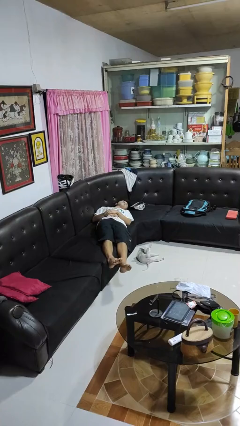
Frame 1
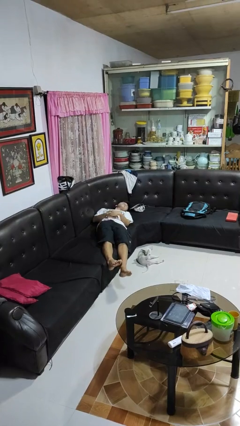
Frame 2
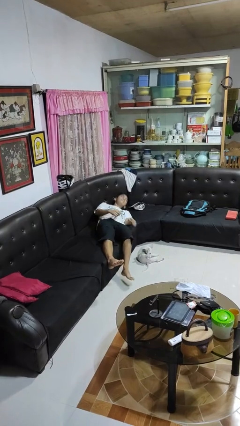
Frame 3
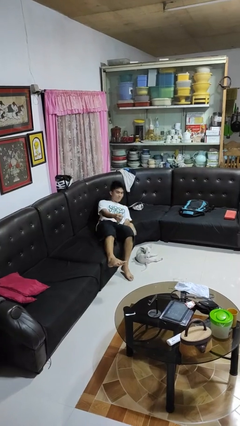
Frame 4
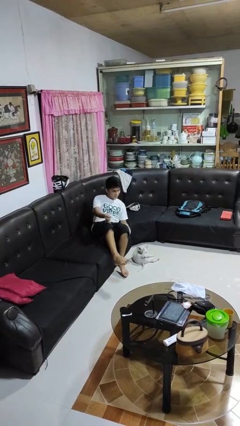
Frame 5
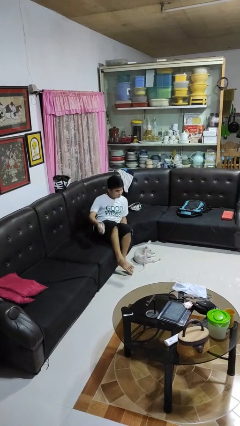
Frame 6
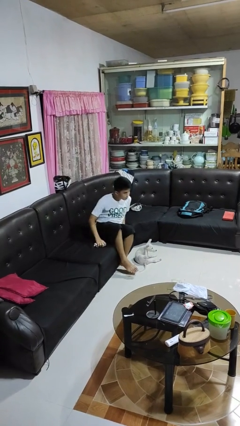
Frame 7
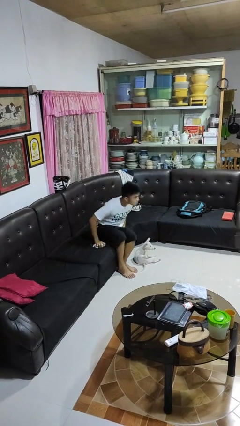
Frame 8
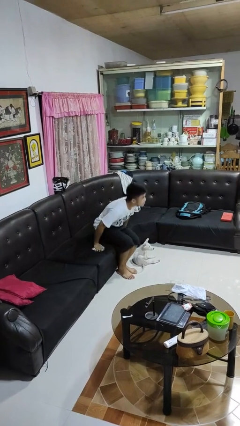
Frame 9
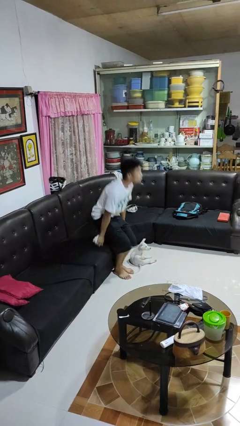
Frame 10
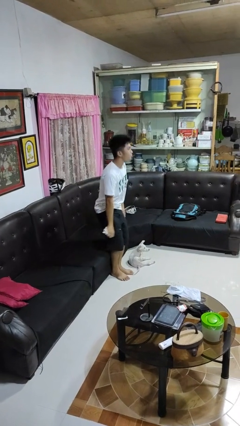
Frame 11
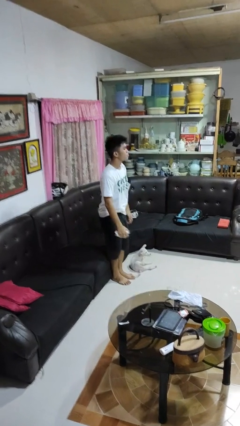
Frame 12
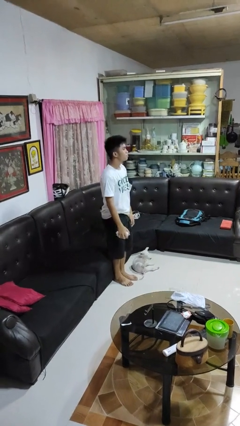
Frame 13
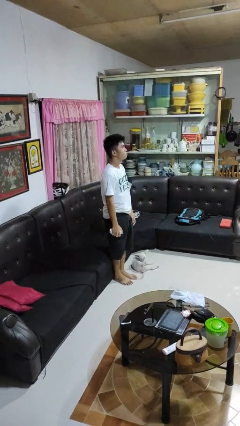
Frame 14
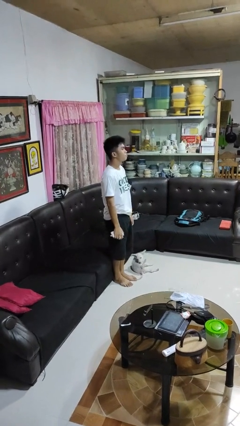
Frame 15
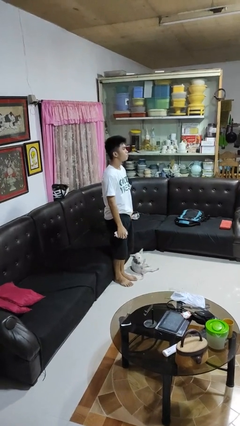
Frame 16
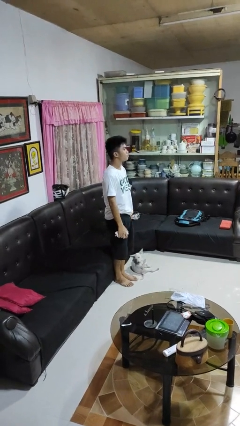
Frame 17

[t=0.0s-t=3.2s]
person stands up

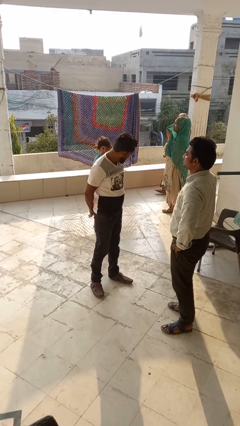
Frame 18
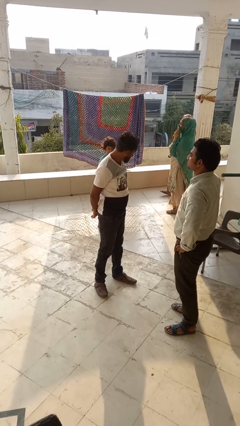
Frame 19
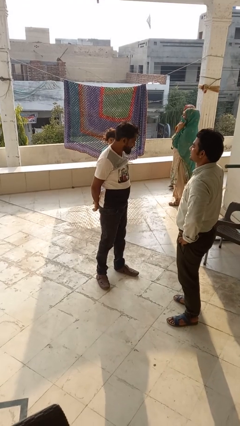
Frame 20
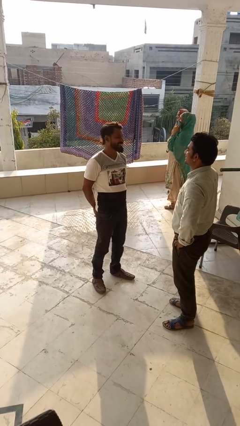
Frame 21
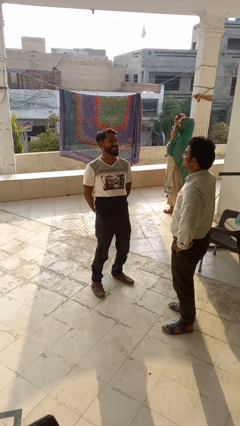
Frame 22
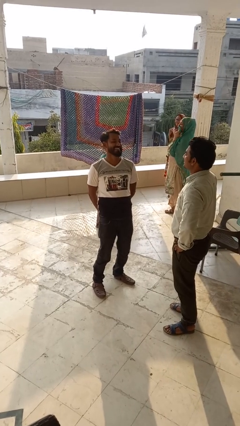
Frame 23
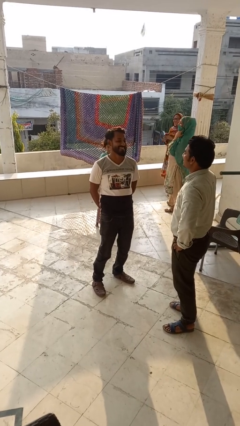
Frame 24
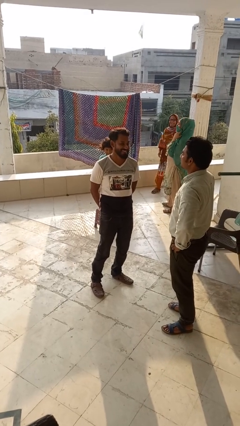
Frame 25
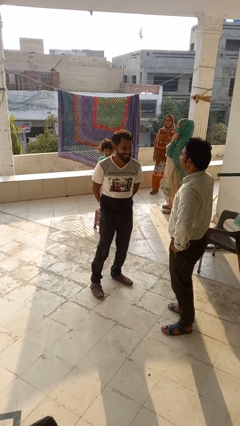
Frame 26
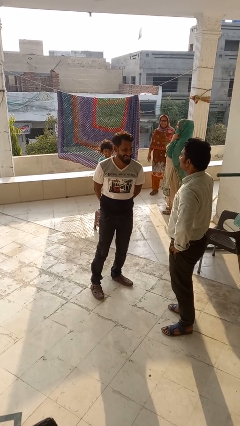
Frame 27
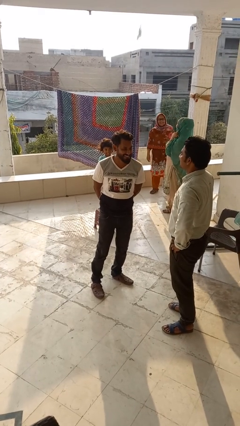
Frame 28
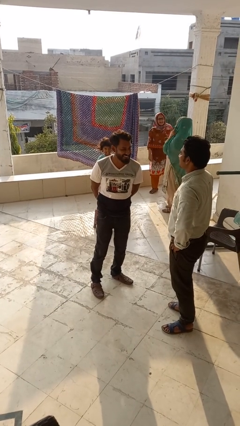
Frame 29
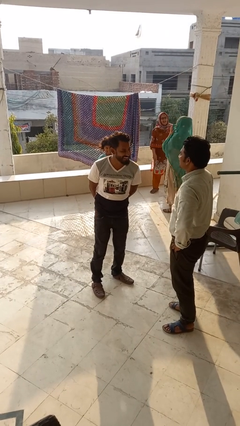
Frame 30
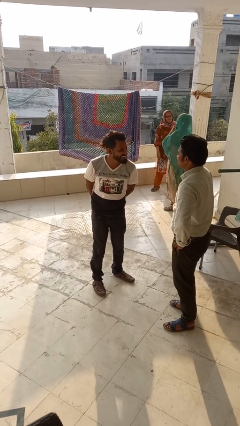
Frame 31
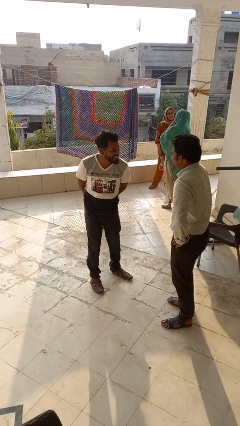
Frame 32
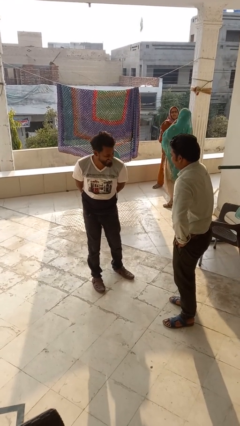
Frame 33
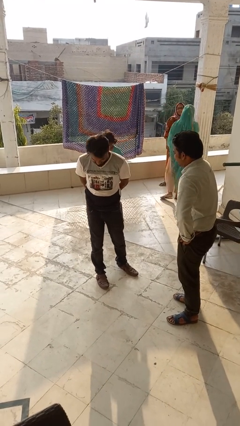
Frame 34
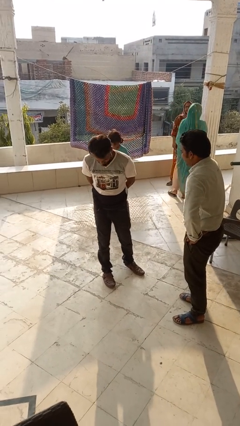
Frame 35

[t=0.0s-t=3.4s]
person laughs with person

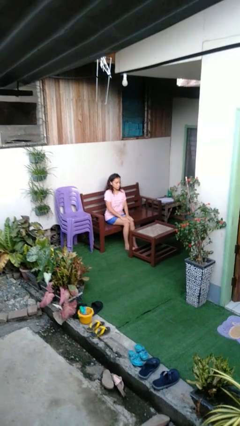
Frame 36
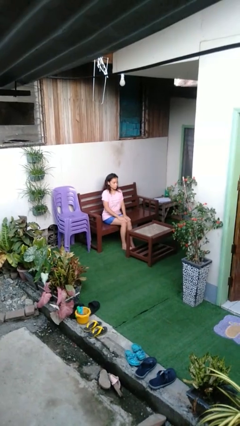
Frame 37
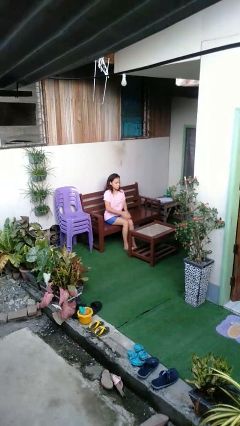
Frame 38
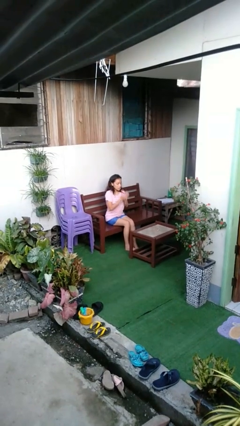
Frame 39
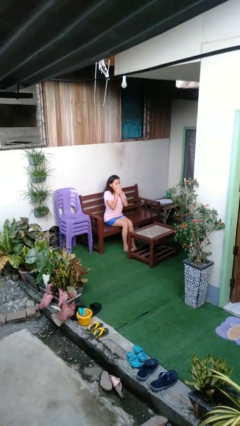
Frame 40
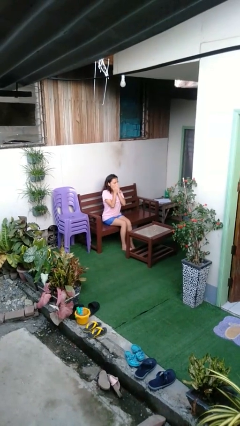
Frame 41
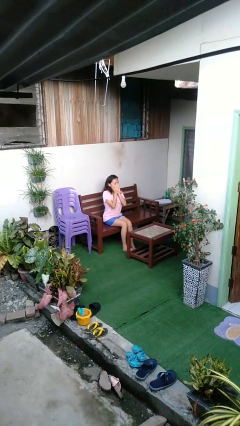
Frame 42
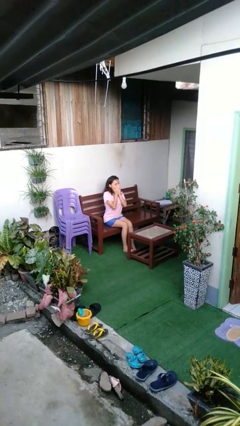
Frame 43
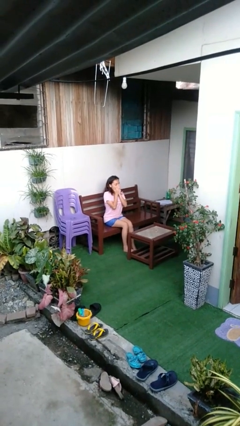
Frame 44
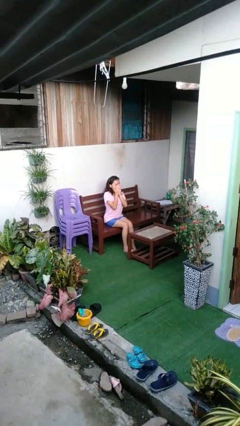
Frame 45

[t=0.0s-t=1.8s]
person yawns

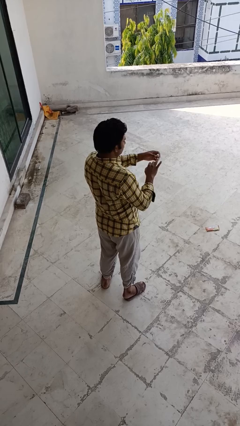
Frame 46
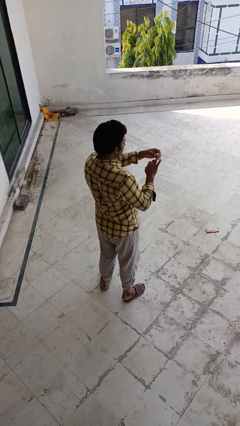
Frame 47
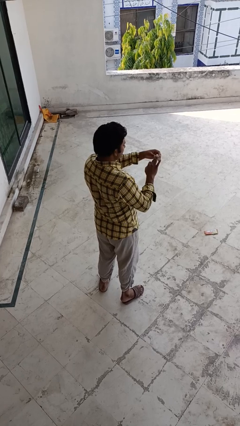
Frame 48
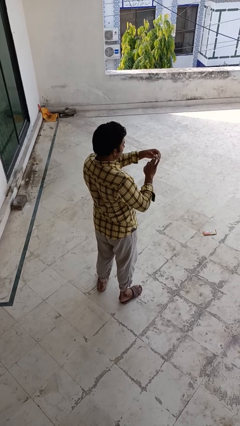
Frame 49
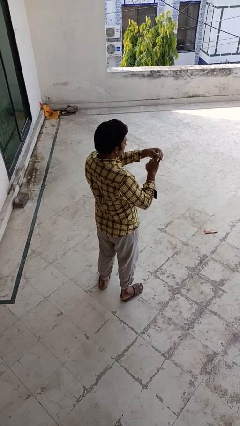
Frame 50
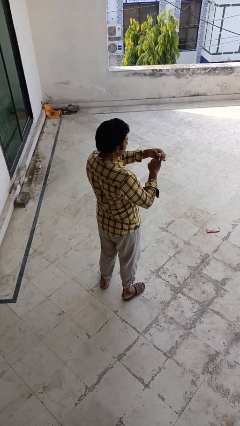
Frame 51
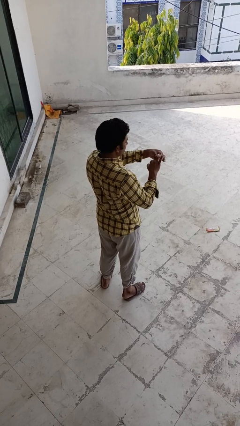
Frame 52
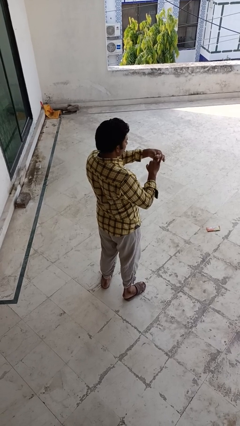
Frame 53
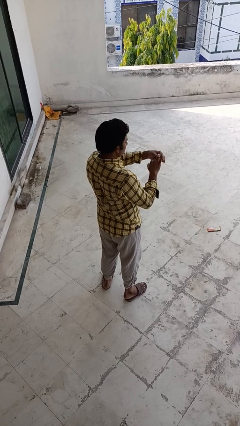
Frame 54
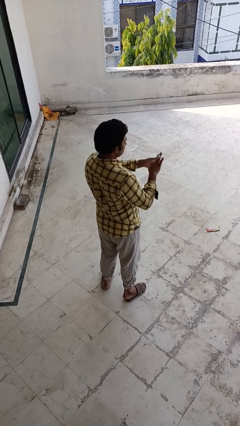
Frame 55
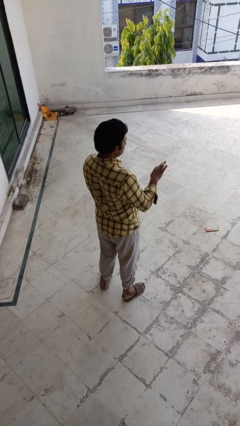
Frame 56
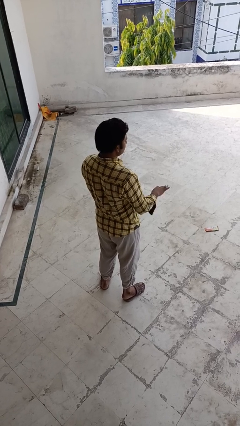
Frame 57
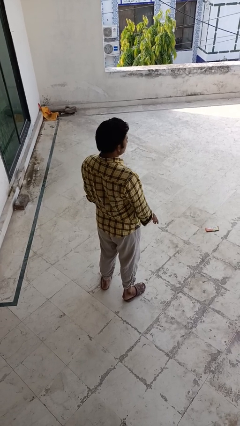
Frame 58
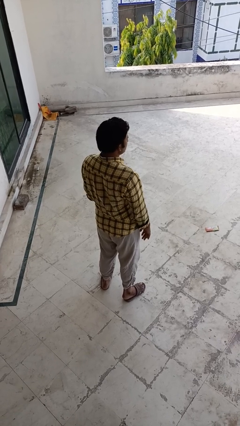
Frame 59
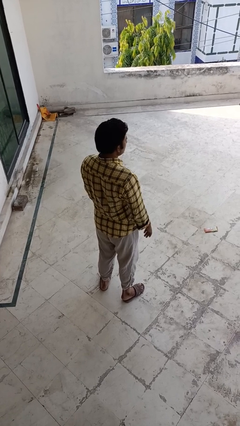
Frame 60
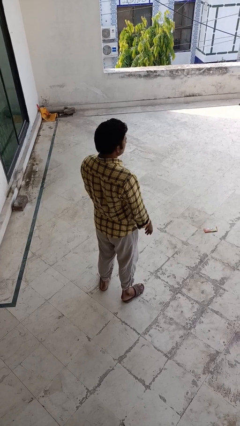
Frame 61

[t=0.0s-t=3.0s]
person puts on ring

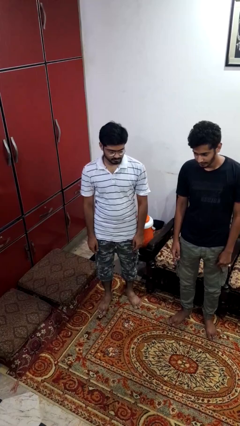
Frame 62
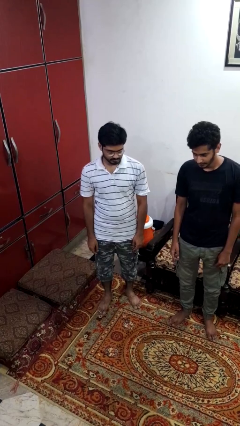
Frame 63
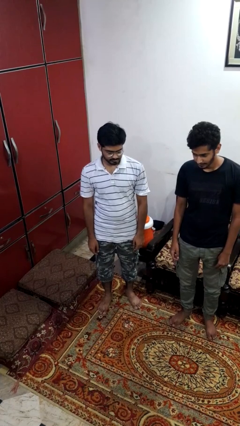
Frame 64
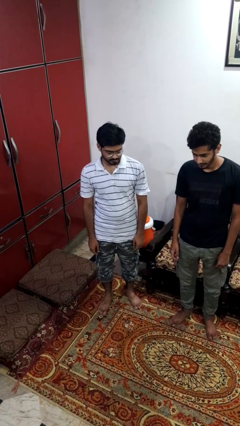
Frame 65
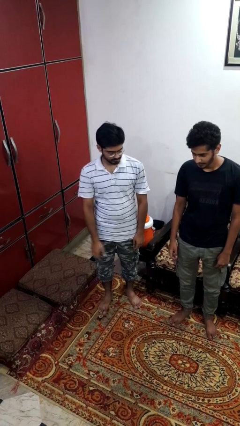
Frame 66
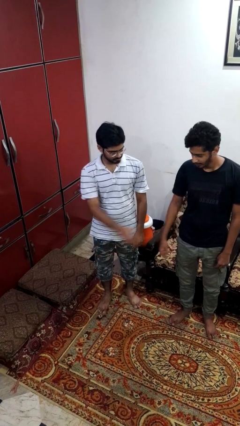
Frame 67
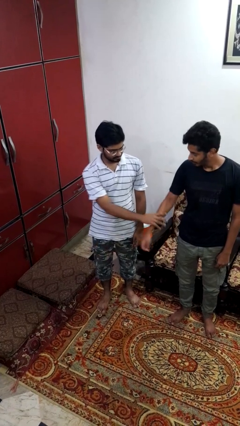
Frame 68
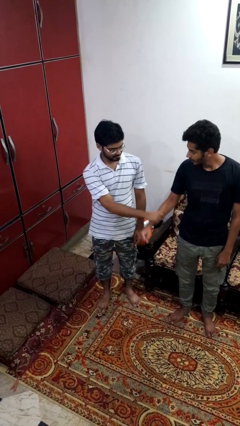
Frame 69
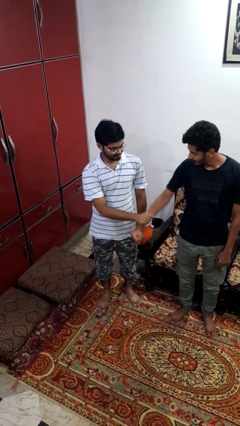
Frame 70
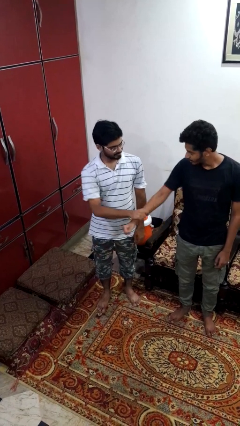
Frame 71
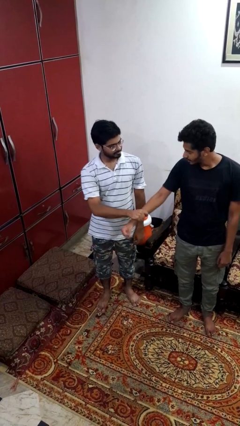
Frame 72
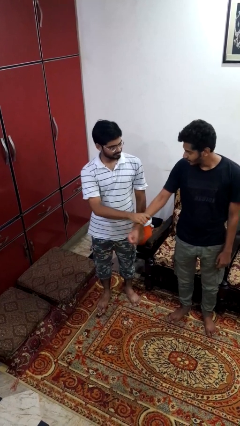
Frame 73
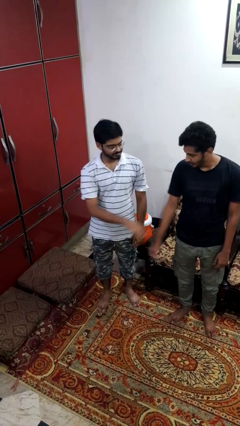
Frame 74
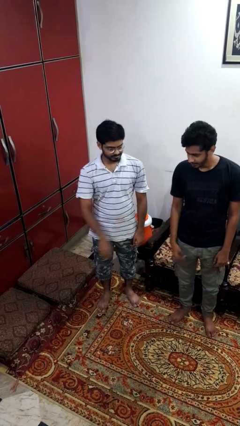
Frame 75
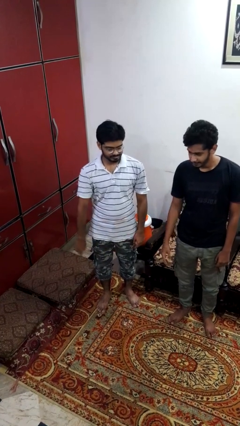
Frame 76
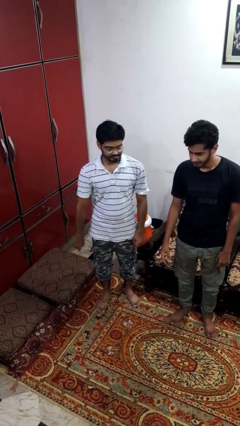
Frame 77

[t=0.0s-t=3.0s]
person grabs person by forearm

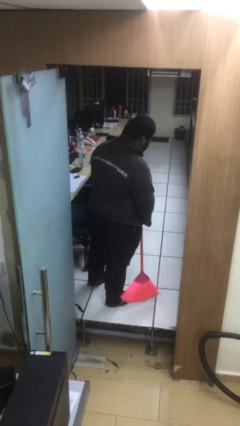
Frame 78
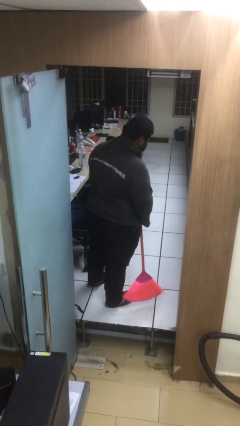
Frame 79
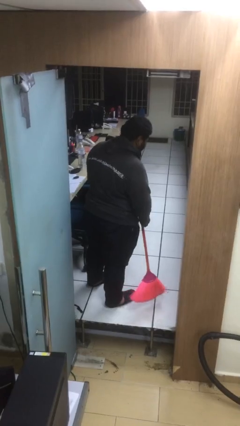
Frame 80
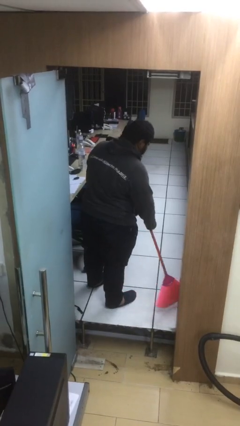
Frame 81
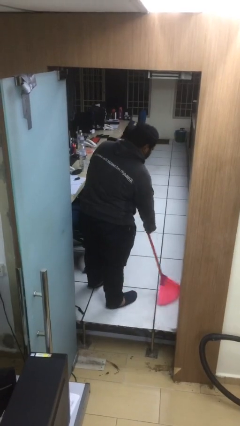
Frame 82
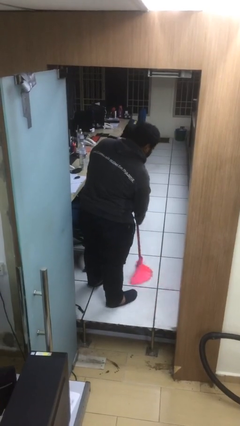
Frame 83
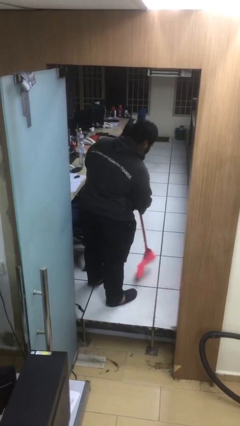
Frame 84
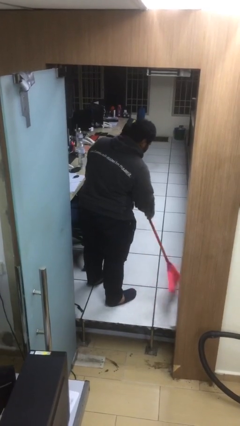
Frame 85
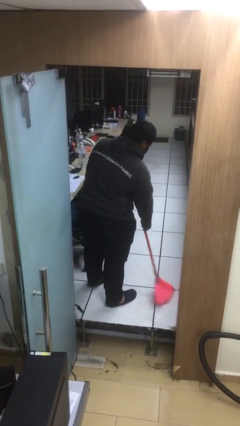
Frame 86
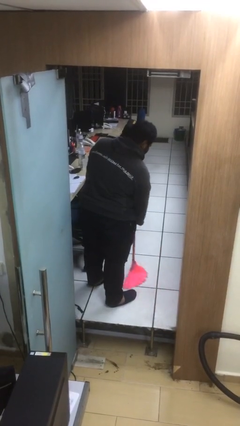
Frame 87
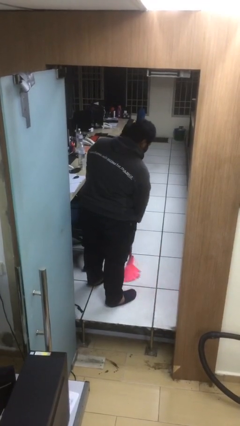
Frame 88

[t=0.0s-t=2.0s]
person sweeps floor

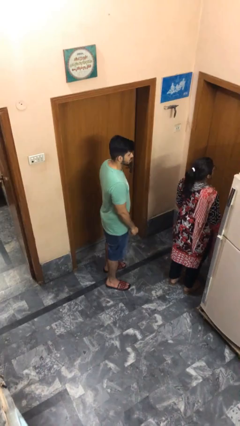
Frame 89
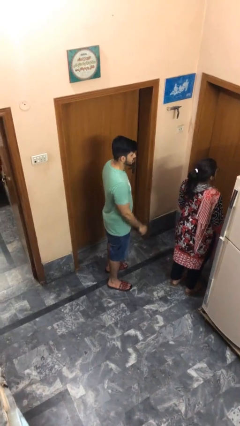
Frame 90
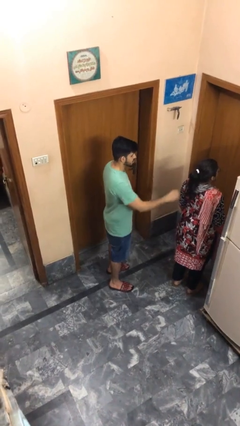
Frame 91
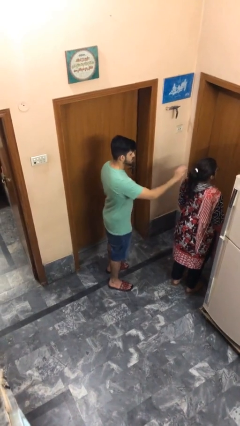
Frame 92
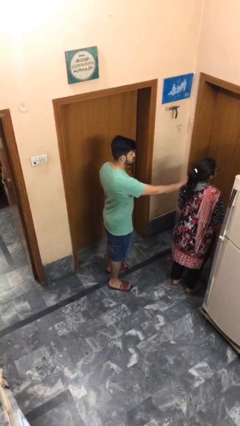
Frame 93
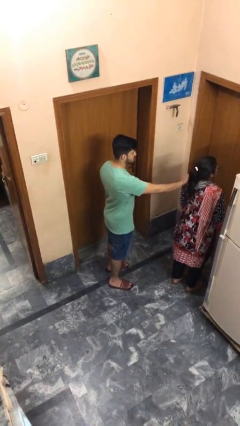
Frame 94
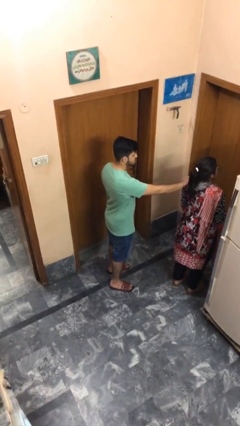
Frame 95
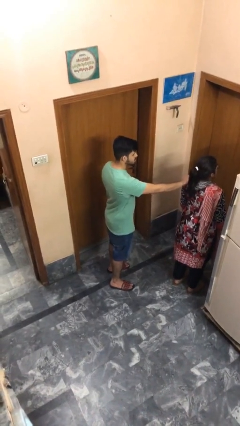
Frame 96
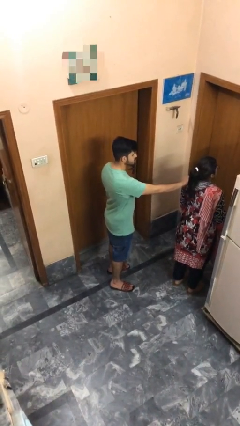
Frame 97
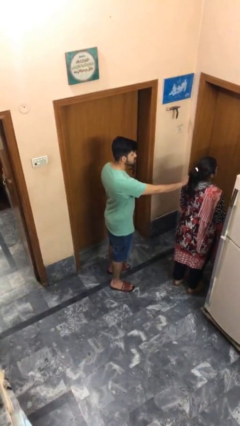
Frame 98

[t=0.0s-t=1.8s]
person grabs person by shoulder
